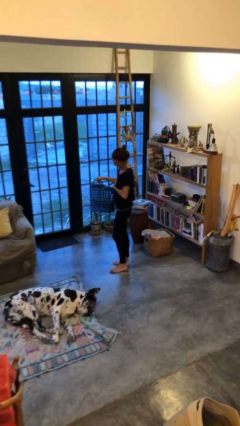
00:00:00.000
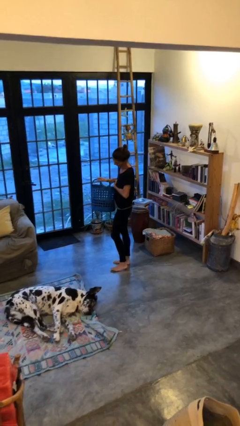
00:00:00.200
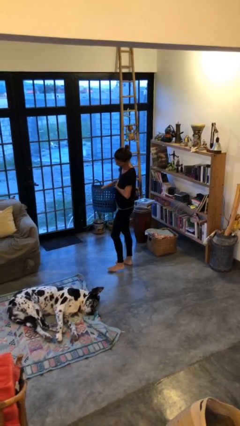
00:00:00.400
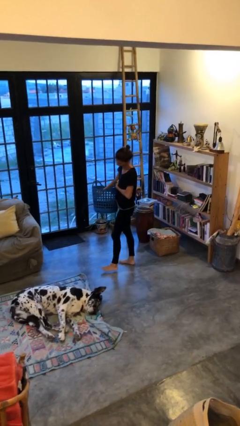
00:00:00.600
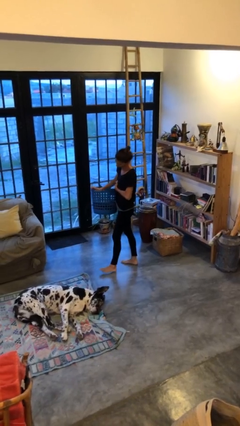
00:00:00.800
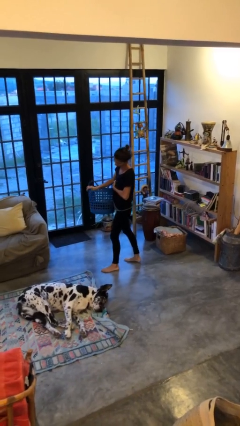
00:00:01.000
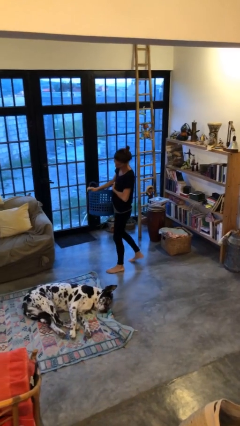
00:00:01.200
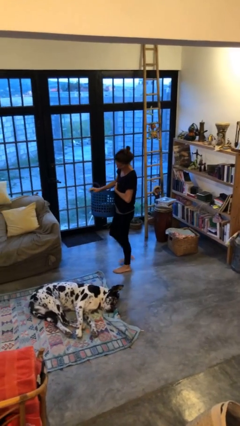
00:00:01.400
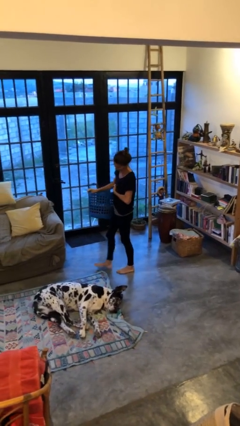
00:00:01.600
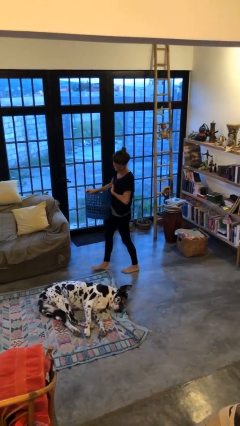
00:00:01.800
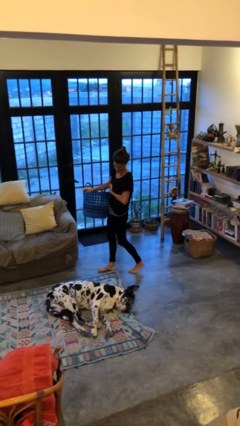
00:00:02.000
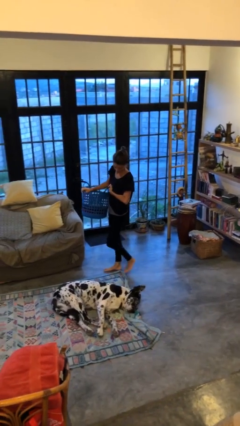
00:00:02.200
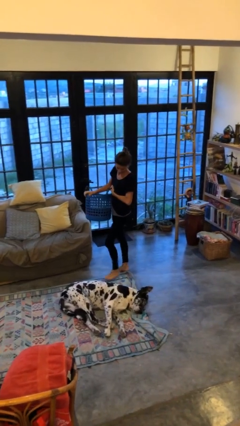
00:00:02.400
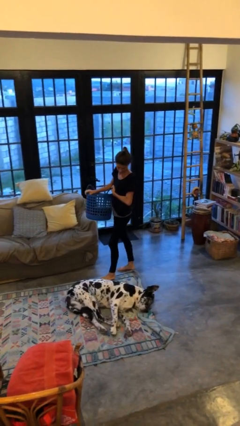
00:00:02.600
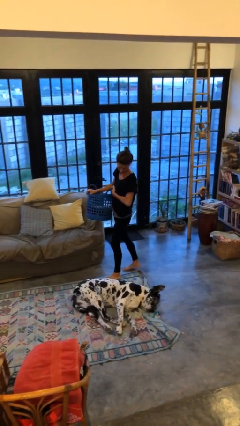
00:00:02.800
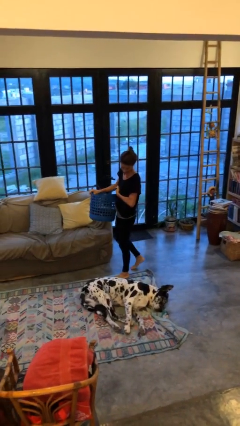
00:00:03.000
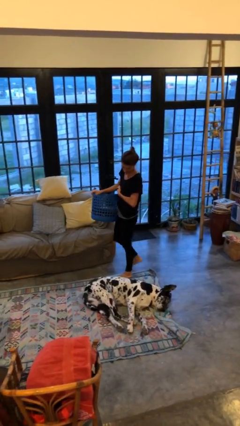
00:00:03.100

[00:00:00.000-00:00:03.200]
person carries laundry basket

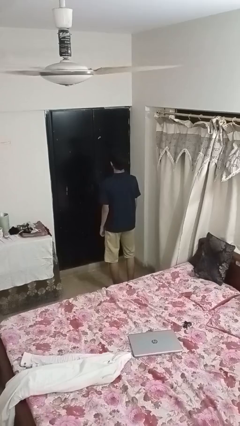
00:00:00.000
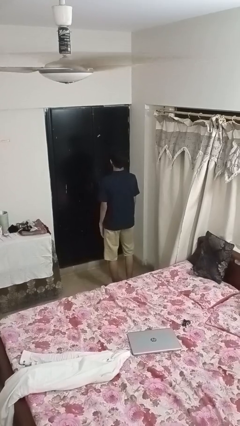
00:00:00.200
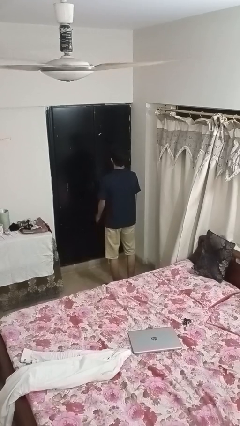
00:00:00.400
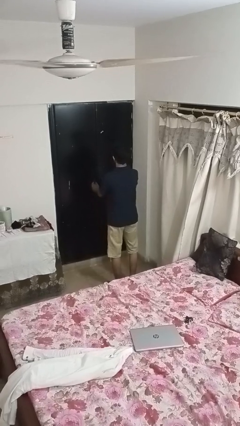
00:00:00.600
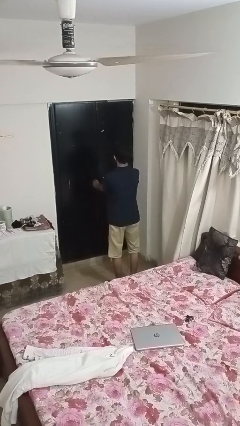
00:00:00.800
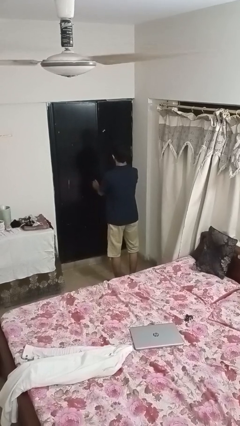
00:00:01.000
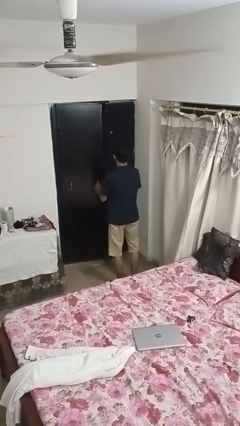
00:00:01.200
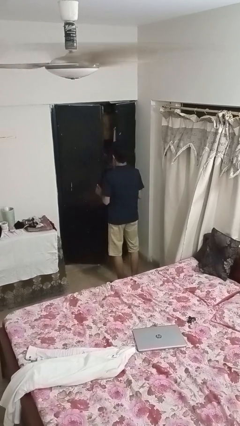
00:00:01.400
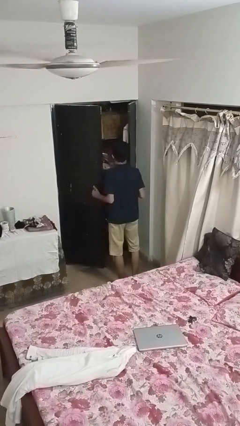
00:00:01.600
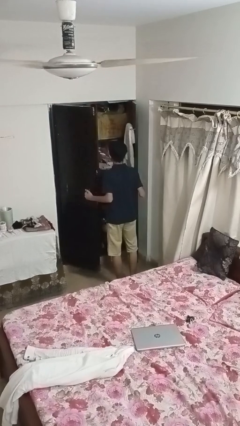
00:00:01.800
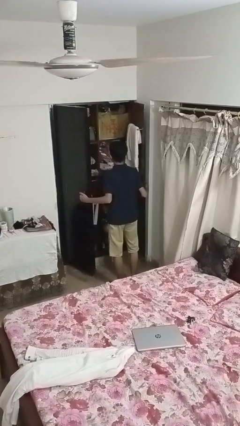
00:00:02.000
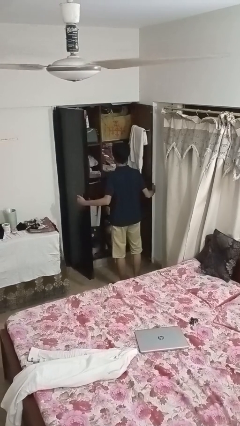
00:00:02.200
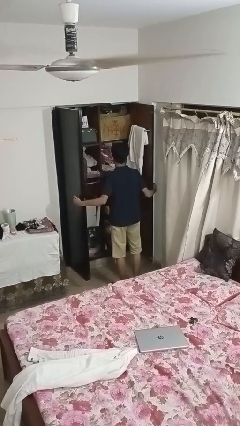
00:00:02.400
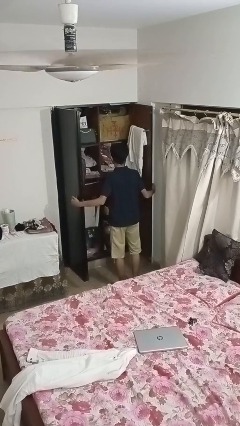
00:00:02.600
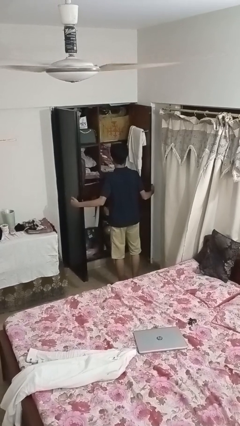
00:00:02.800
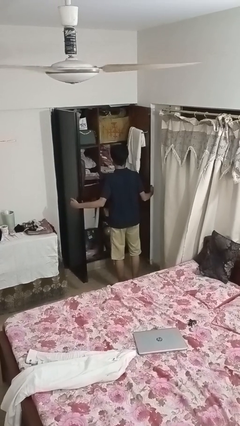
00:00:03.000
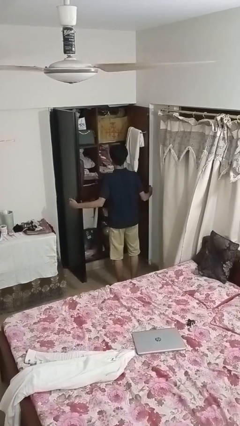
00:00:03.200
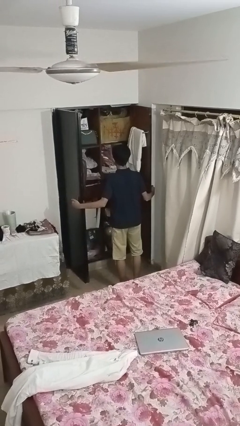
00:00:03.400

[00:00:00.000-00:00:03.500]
person opens closet door

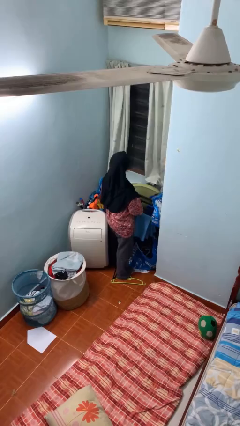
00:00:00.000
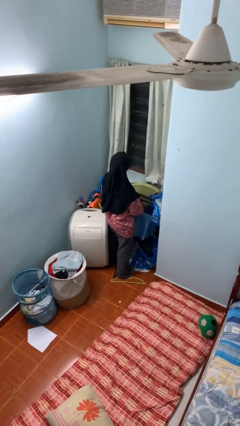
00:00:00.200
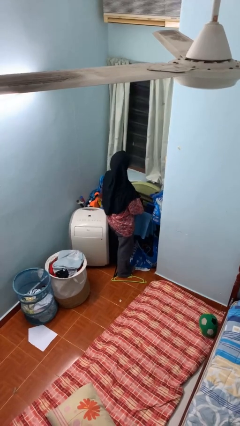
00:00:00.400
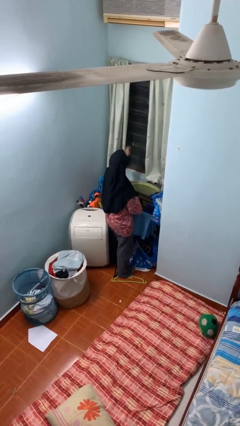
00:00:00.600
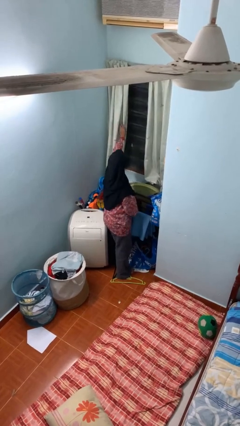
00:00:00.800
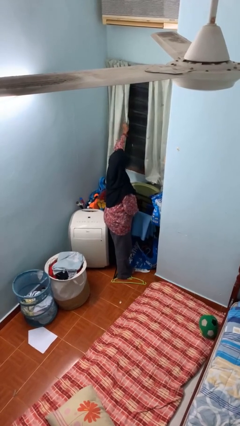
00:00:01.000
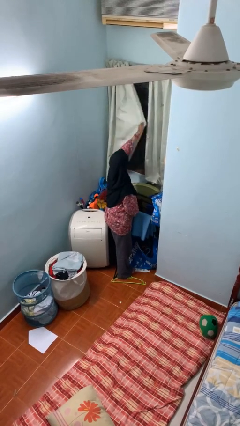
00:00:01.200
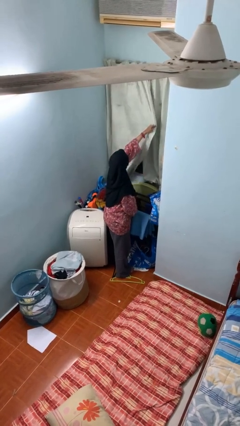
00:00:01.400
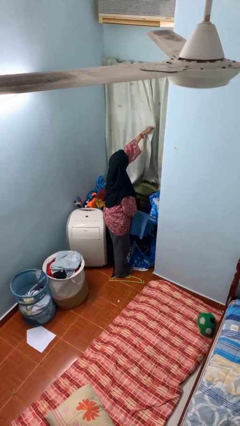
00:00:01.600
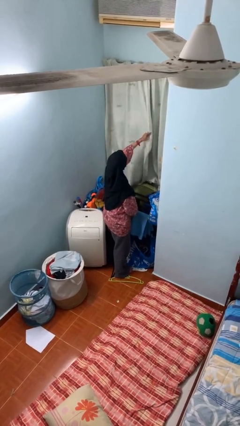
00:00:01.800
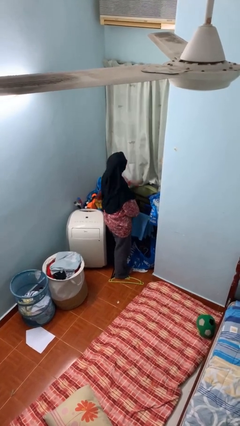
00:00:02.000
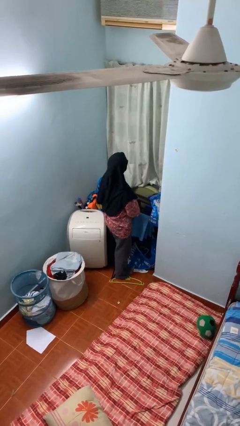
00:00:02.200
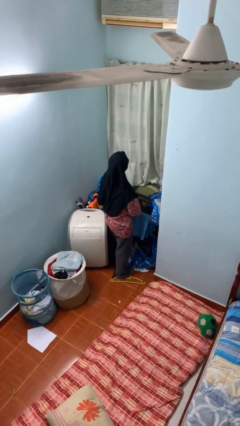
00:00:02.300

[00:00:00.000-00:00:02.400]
person closes curtains

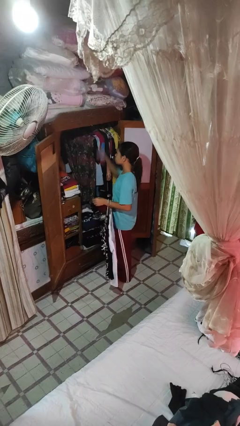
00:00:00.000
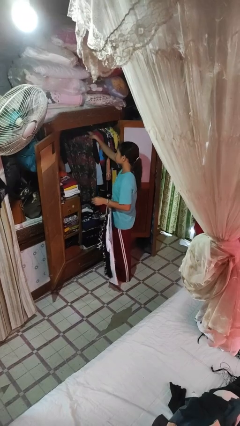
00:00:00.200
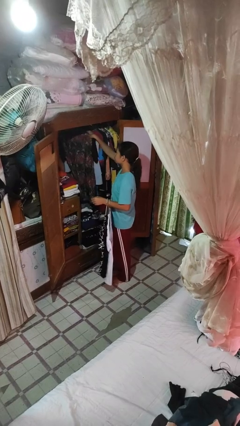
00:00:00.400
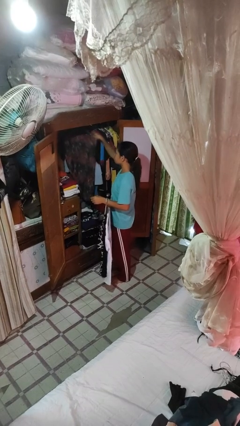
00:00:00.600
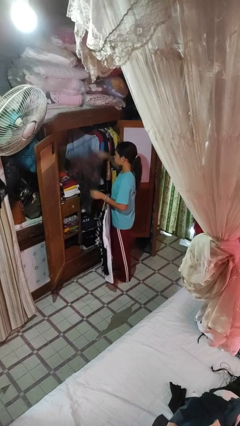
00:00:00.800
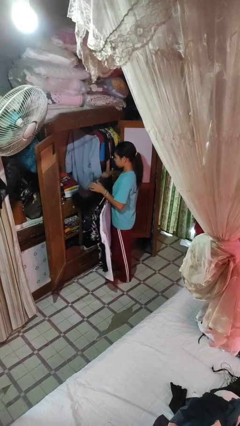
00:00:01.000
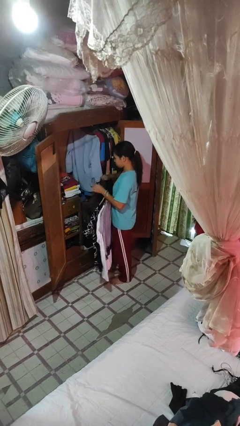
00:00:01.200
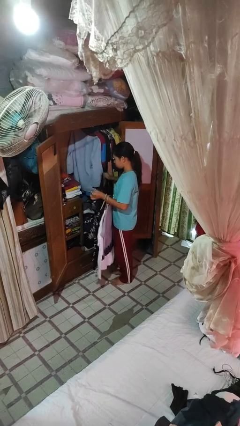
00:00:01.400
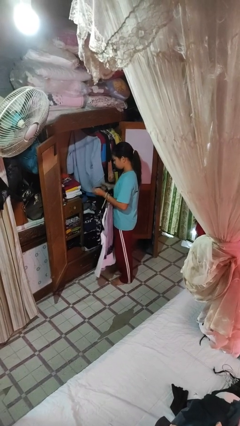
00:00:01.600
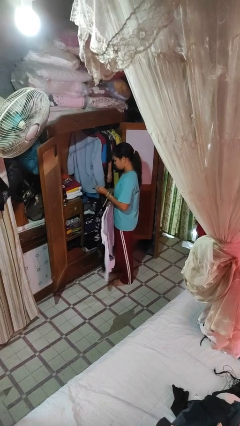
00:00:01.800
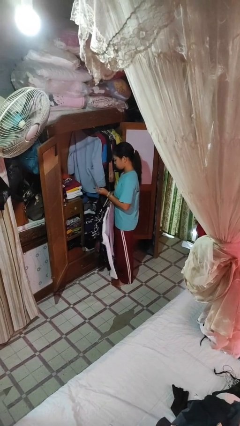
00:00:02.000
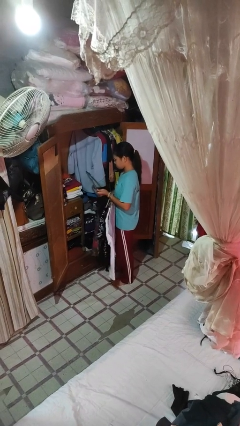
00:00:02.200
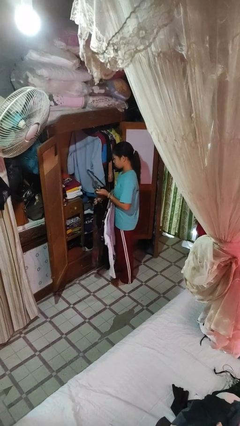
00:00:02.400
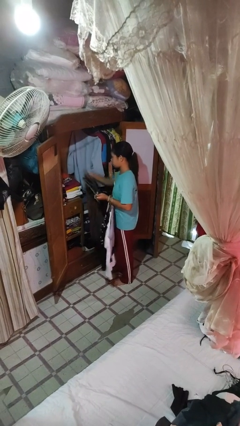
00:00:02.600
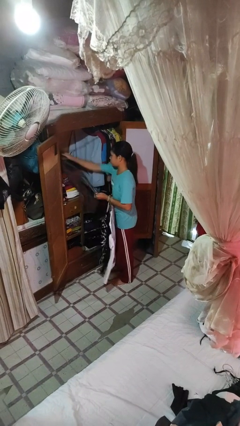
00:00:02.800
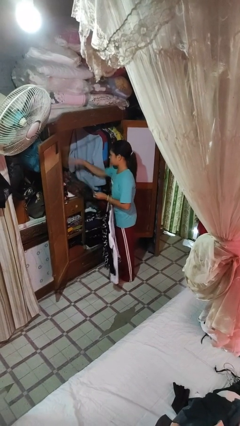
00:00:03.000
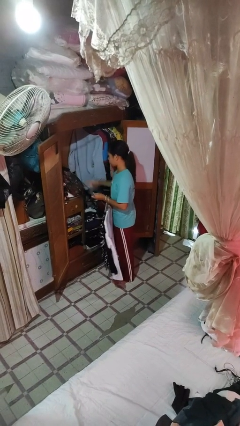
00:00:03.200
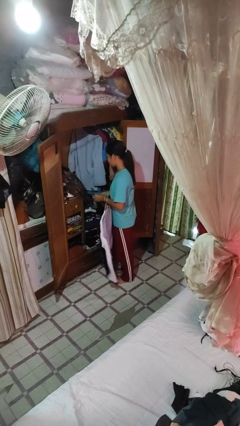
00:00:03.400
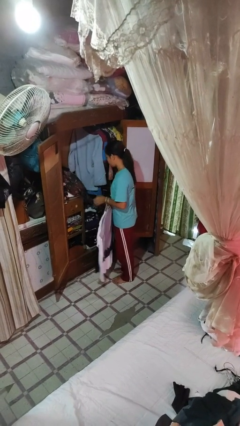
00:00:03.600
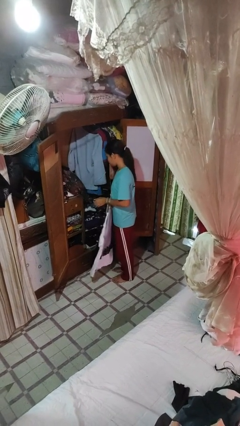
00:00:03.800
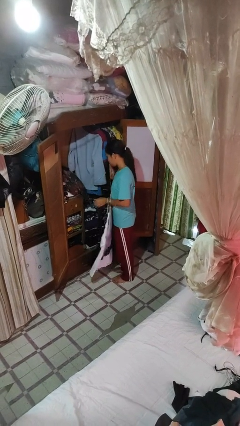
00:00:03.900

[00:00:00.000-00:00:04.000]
person takes clothes from closet

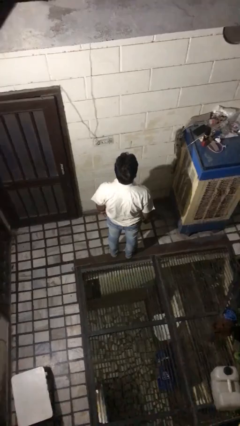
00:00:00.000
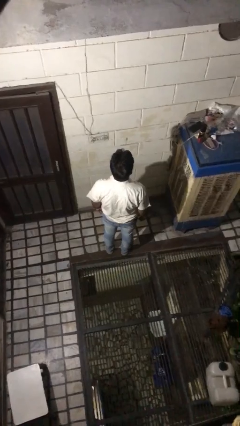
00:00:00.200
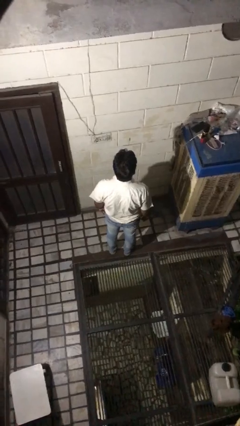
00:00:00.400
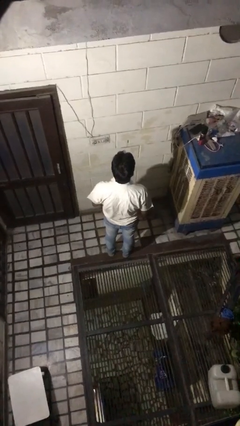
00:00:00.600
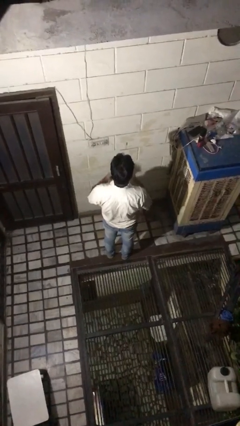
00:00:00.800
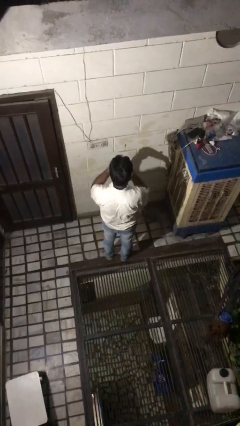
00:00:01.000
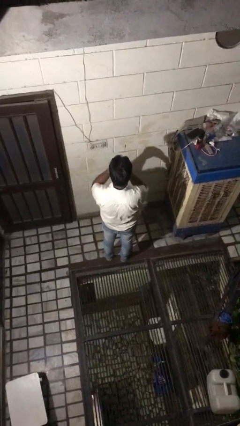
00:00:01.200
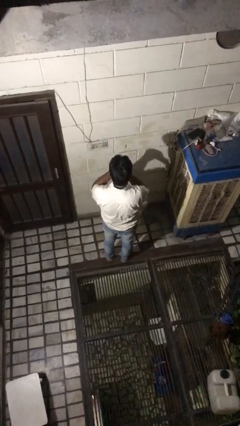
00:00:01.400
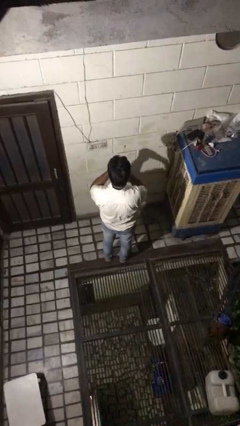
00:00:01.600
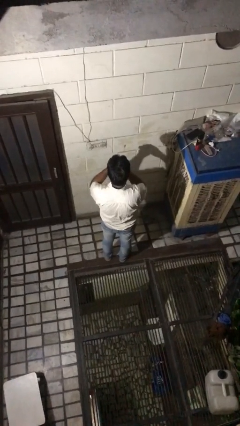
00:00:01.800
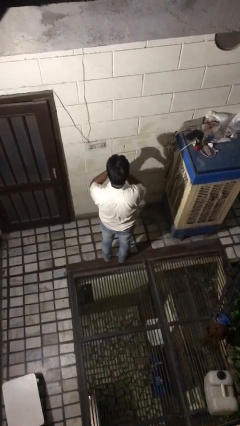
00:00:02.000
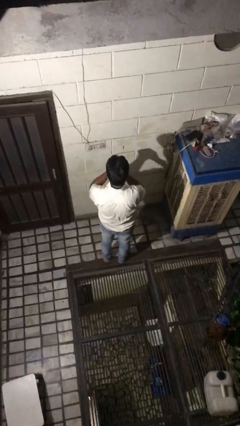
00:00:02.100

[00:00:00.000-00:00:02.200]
person snaps fingers

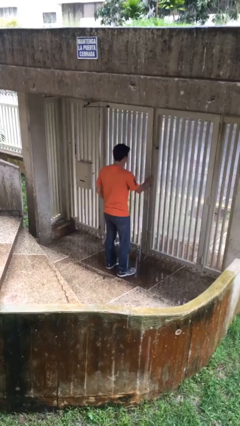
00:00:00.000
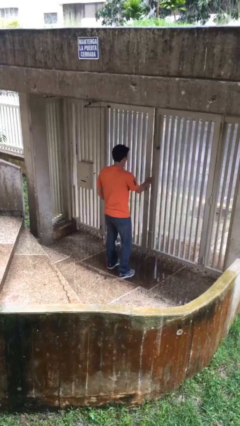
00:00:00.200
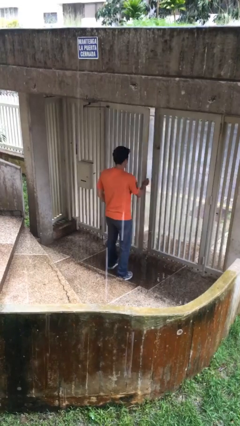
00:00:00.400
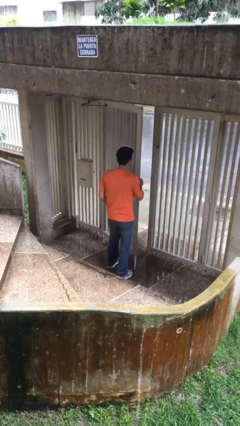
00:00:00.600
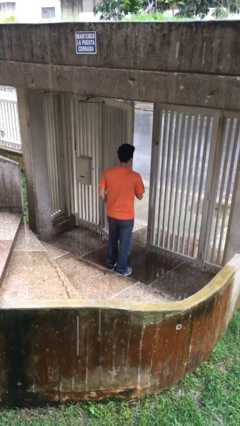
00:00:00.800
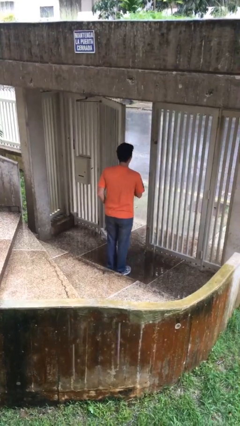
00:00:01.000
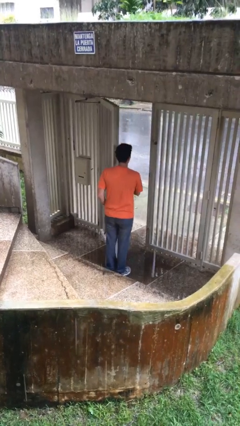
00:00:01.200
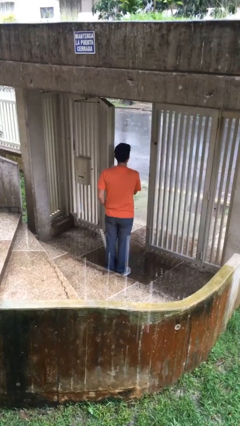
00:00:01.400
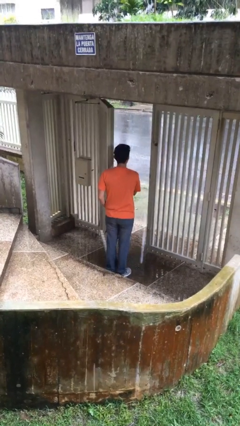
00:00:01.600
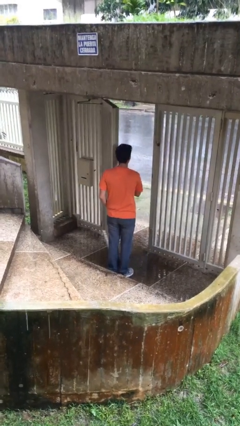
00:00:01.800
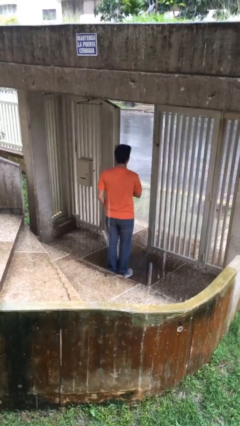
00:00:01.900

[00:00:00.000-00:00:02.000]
person opens facility door

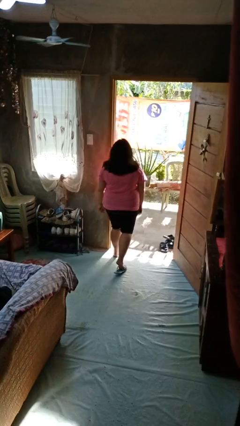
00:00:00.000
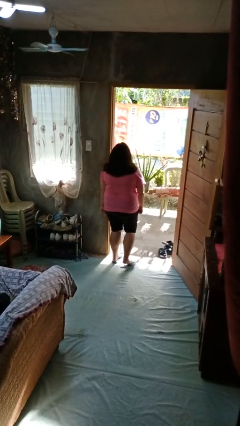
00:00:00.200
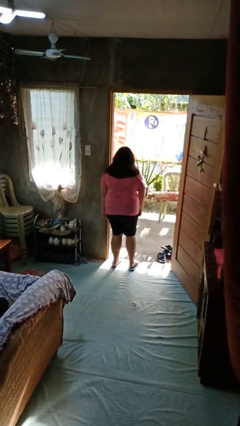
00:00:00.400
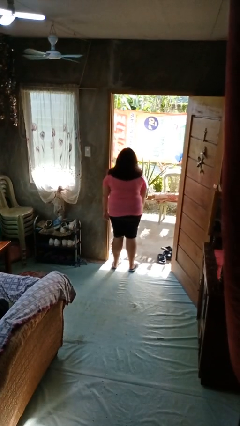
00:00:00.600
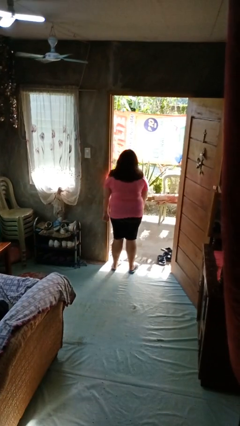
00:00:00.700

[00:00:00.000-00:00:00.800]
person bumps into wall
